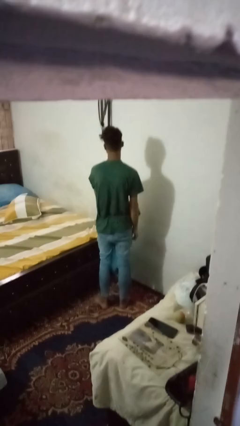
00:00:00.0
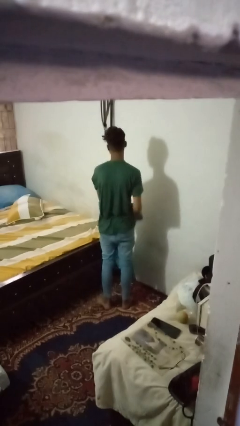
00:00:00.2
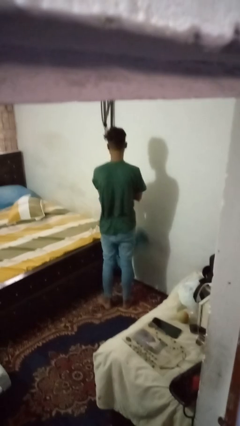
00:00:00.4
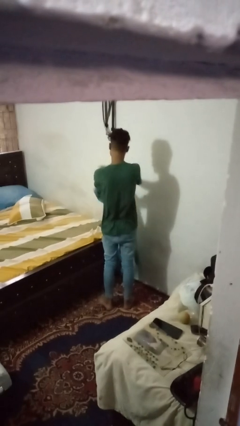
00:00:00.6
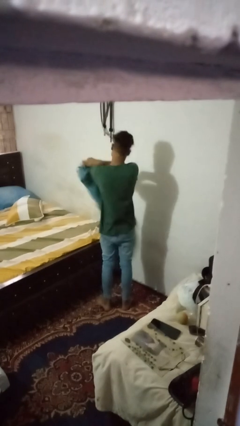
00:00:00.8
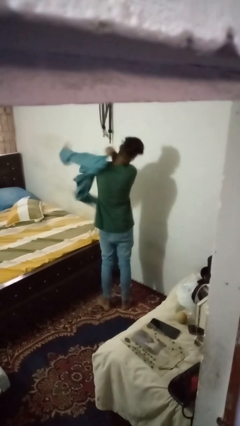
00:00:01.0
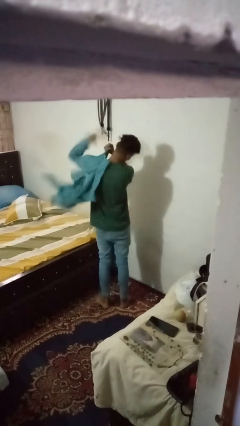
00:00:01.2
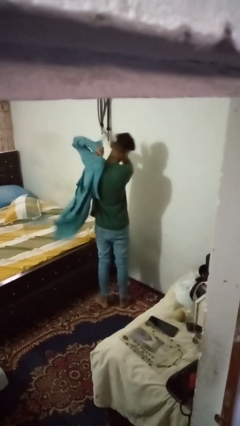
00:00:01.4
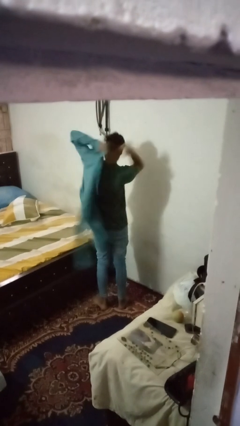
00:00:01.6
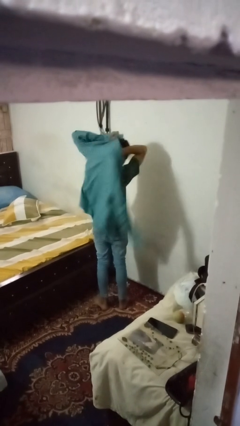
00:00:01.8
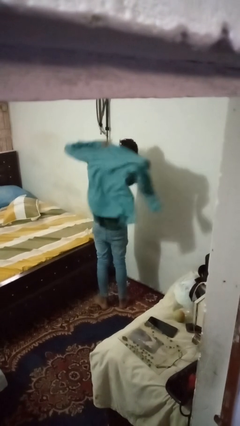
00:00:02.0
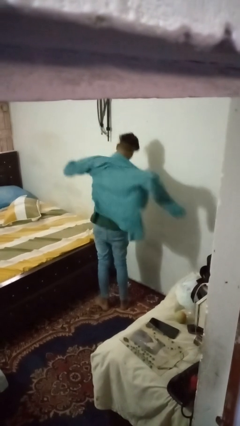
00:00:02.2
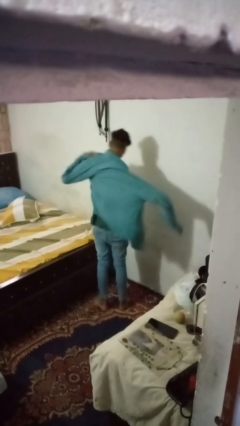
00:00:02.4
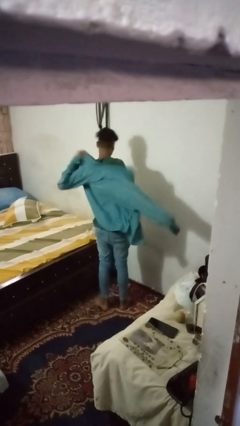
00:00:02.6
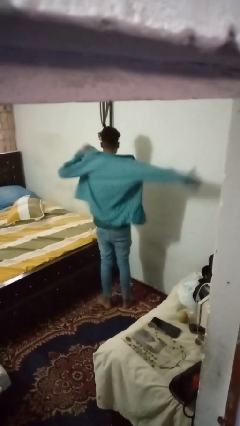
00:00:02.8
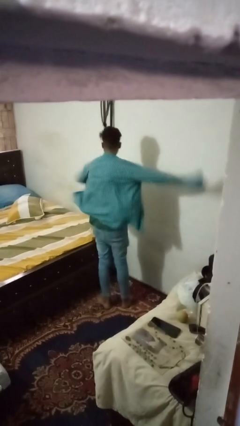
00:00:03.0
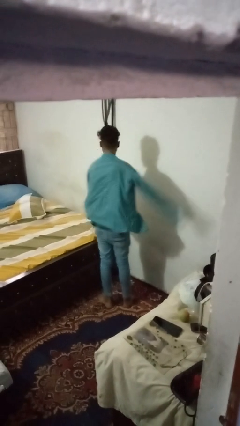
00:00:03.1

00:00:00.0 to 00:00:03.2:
person puts on shirt

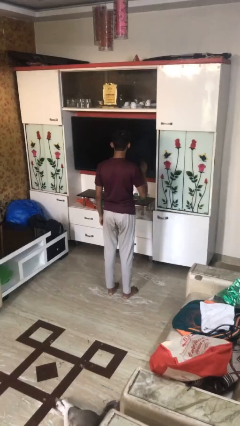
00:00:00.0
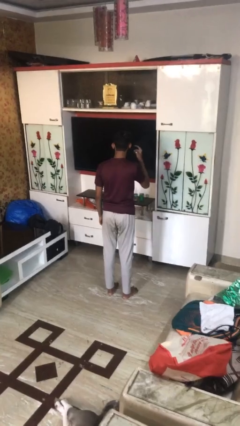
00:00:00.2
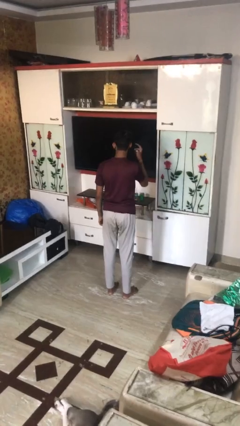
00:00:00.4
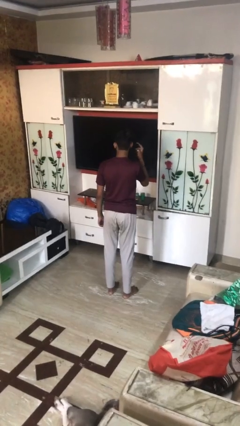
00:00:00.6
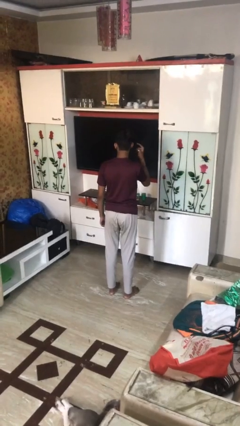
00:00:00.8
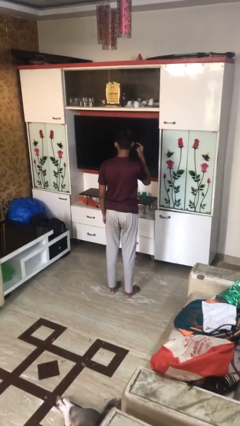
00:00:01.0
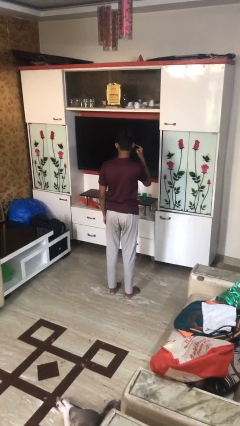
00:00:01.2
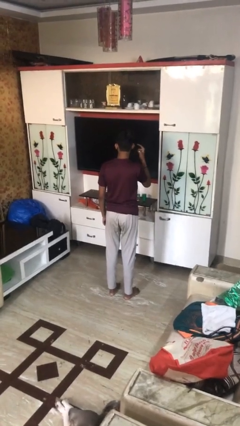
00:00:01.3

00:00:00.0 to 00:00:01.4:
person gestures listen closely

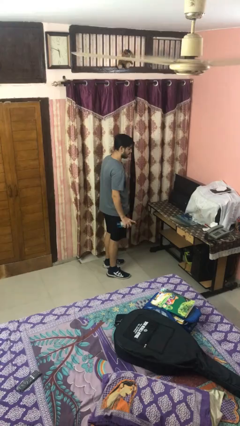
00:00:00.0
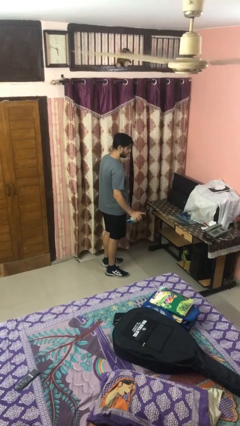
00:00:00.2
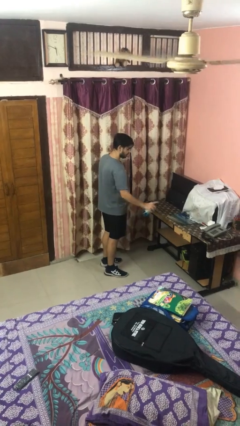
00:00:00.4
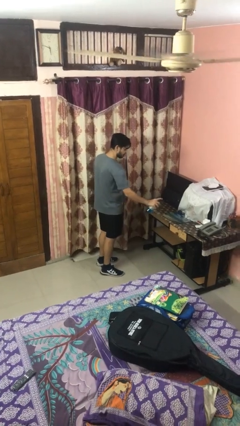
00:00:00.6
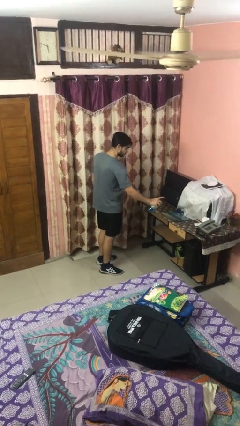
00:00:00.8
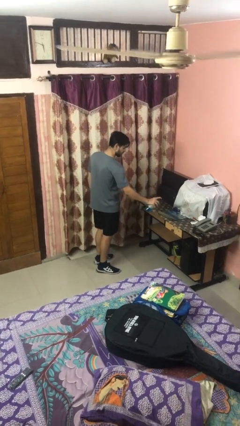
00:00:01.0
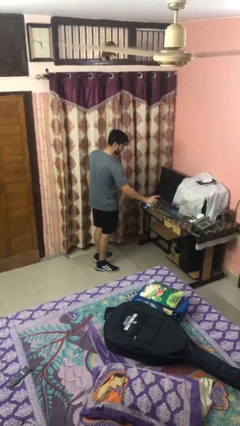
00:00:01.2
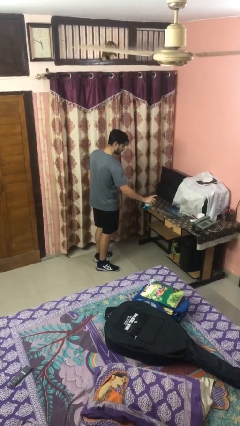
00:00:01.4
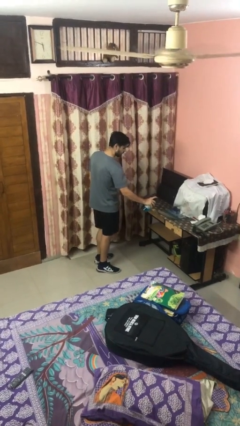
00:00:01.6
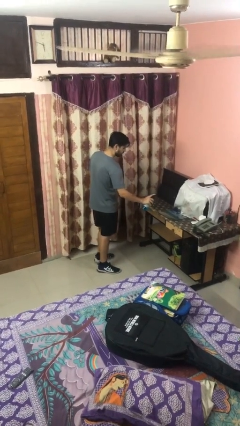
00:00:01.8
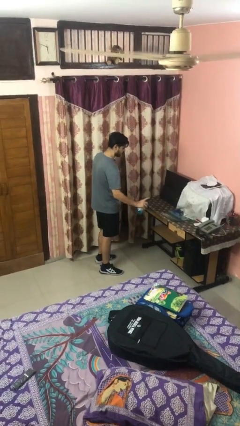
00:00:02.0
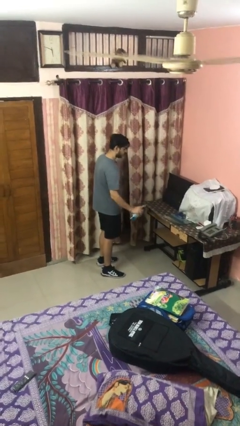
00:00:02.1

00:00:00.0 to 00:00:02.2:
person sprays from bottle

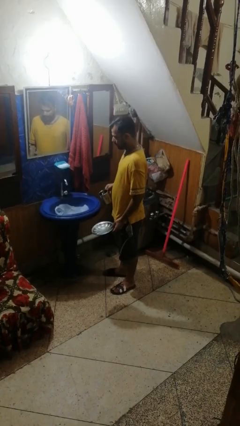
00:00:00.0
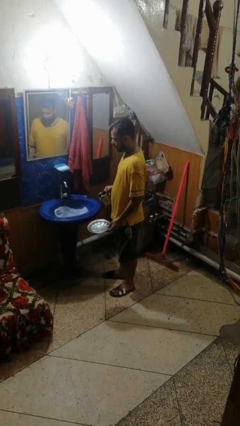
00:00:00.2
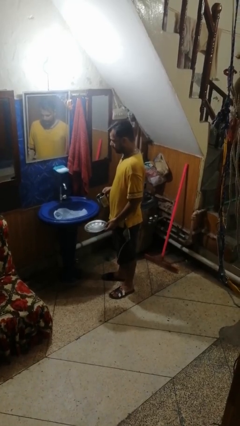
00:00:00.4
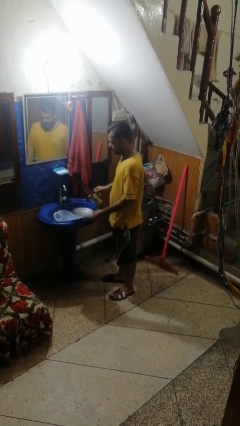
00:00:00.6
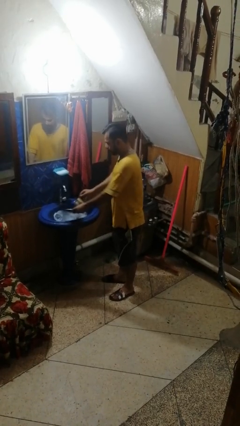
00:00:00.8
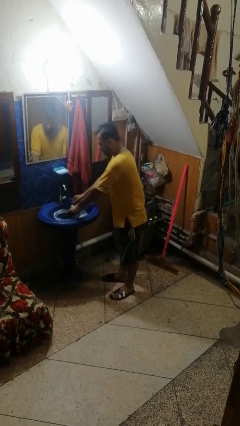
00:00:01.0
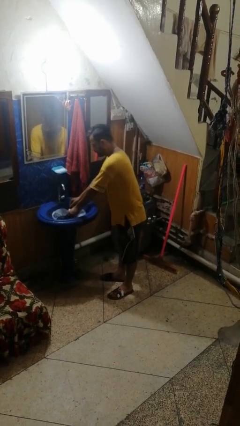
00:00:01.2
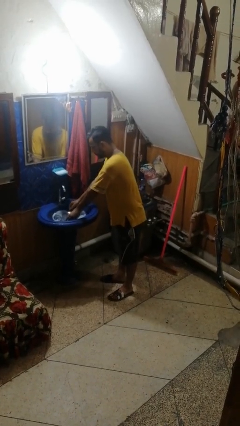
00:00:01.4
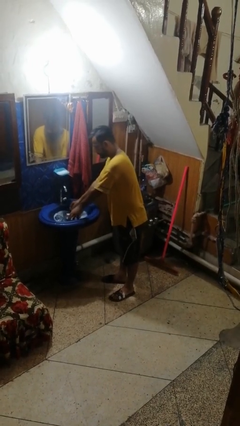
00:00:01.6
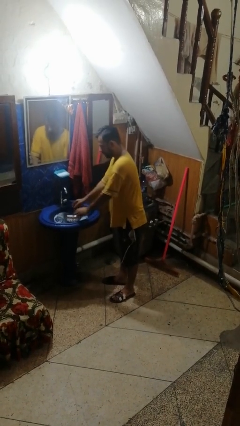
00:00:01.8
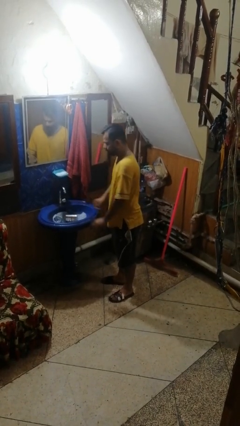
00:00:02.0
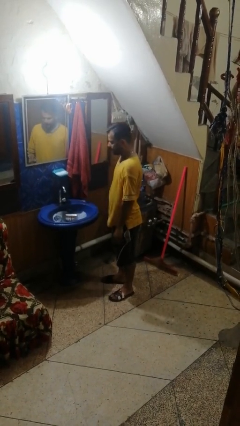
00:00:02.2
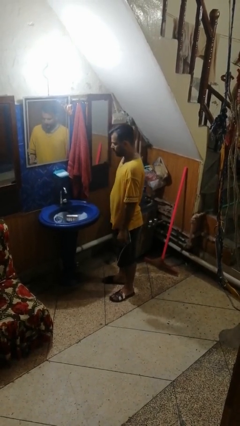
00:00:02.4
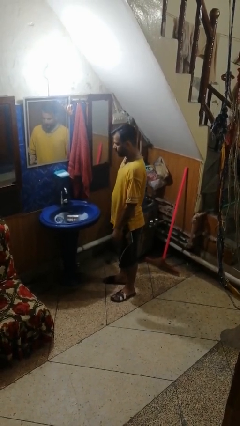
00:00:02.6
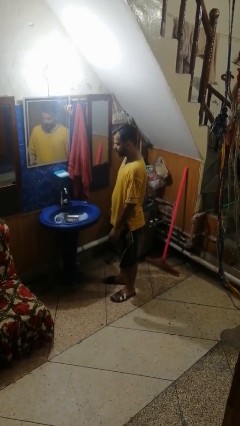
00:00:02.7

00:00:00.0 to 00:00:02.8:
person loads dishwasher

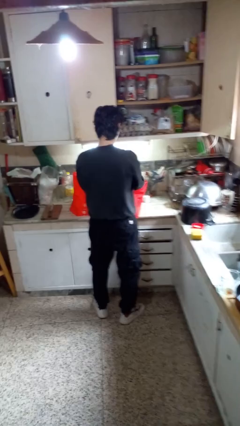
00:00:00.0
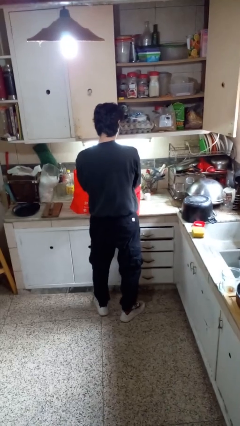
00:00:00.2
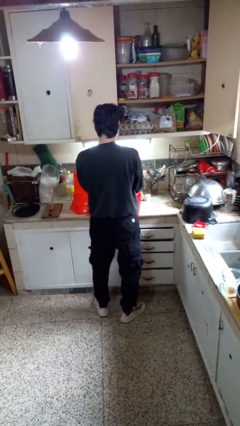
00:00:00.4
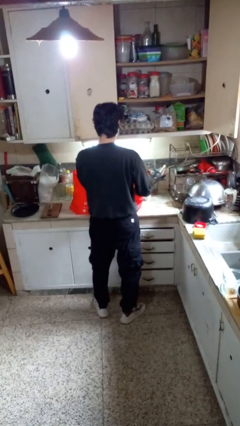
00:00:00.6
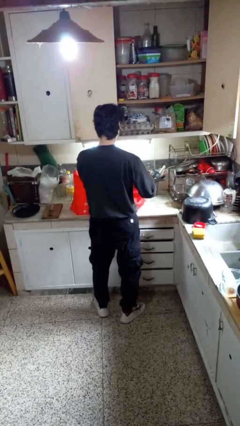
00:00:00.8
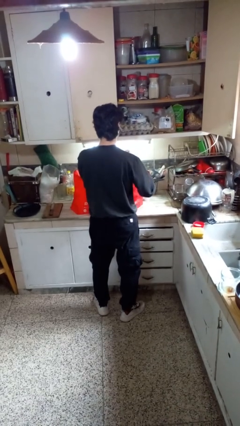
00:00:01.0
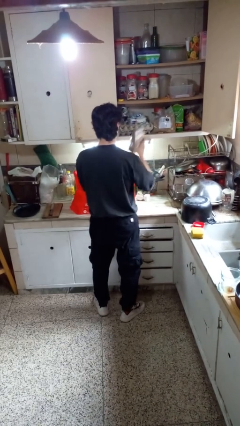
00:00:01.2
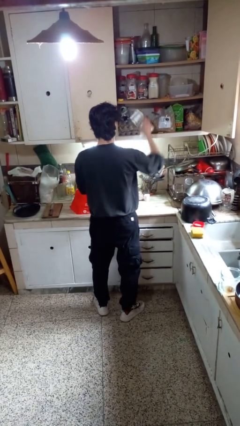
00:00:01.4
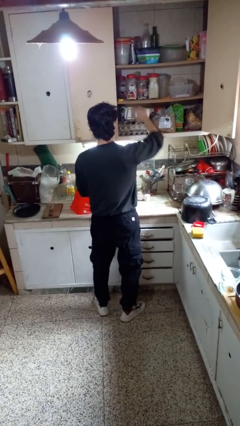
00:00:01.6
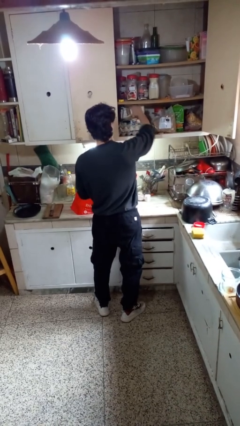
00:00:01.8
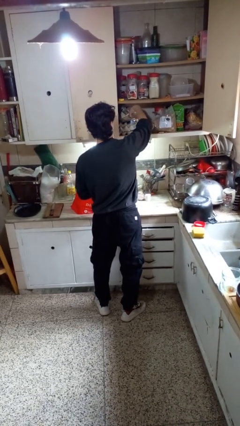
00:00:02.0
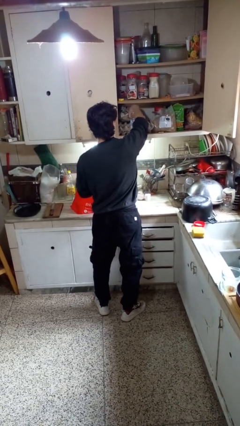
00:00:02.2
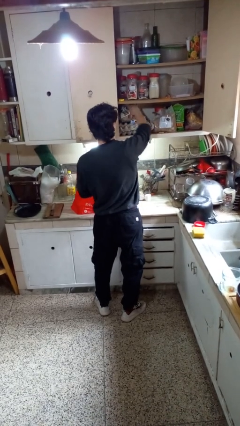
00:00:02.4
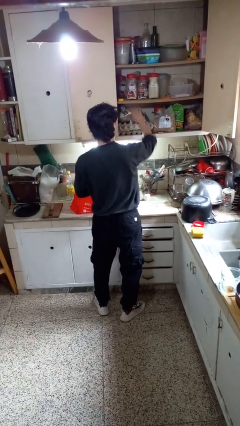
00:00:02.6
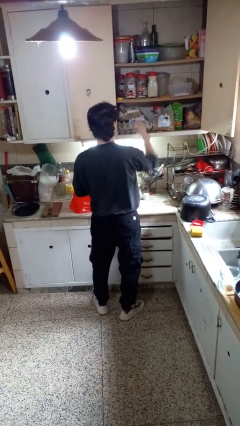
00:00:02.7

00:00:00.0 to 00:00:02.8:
person loads groceries into cabinet

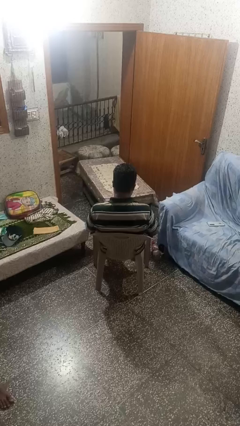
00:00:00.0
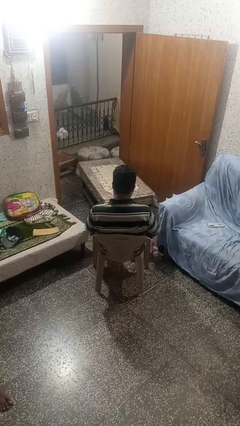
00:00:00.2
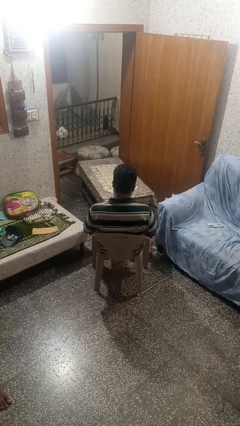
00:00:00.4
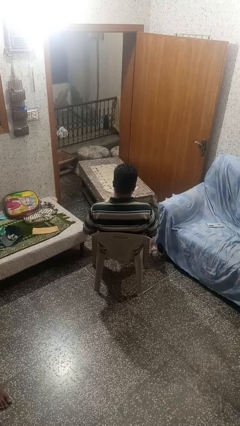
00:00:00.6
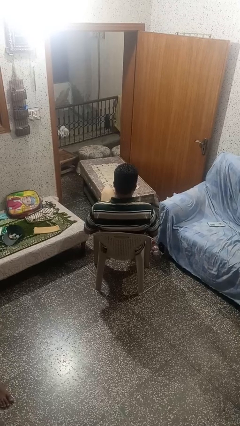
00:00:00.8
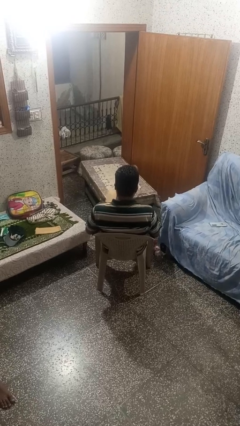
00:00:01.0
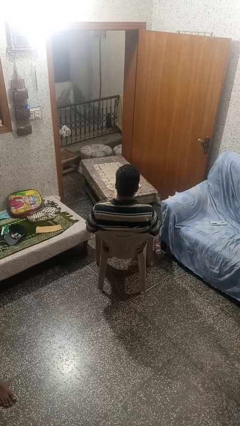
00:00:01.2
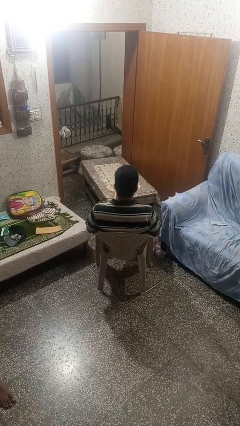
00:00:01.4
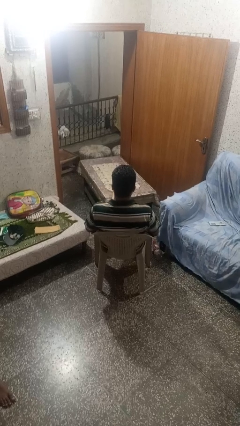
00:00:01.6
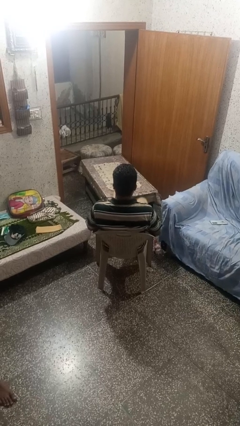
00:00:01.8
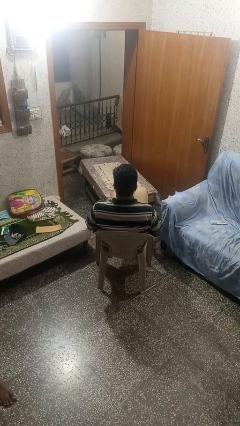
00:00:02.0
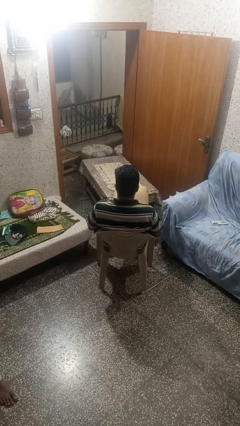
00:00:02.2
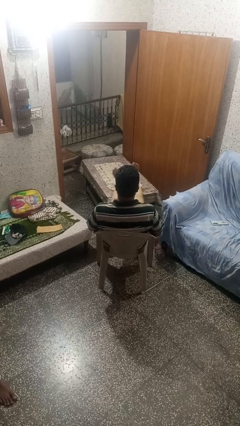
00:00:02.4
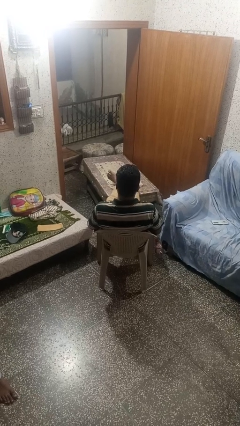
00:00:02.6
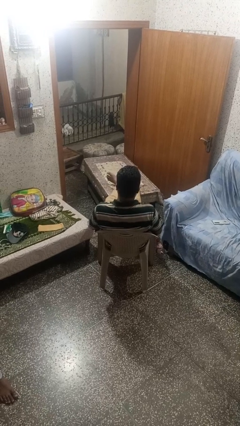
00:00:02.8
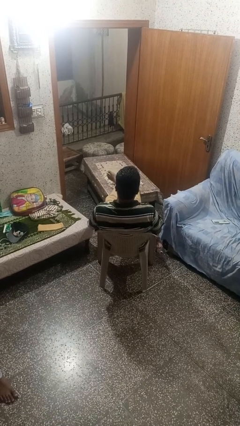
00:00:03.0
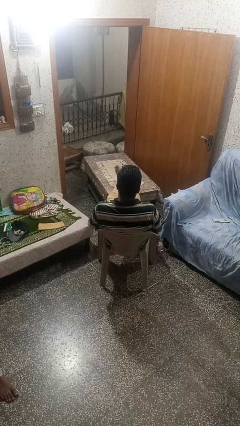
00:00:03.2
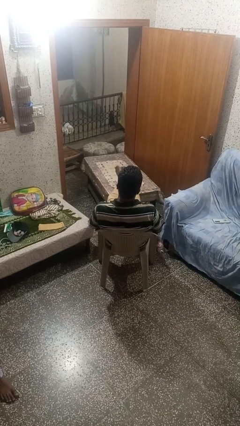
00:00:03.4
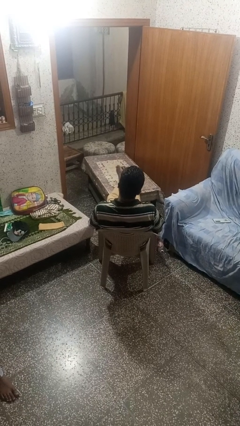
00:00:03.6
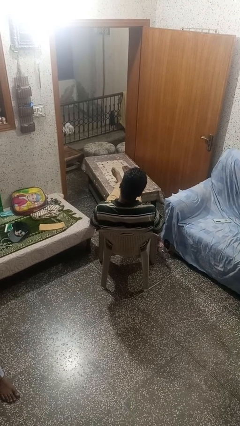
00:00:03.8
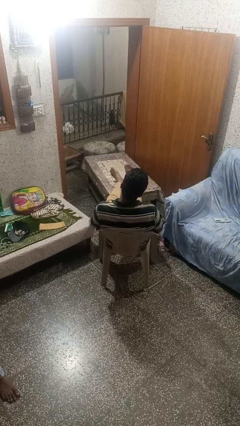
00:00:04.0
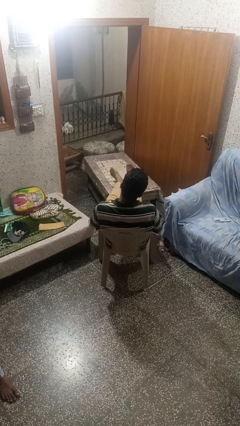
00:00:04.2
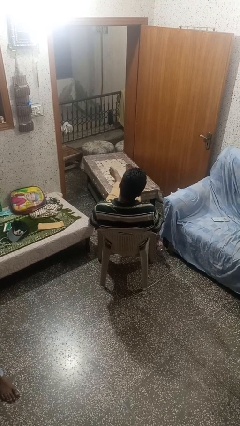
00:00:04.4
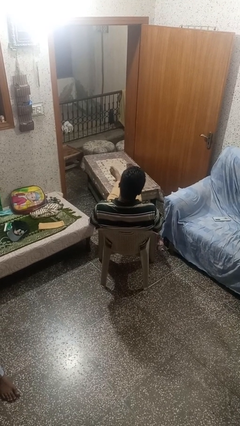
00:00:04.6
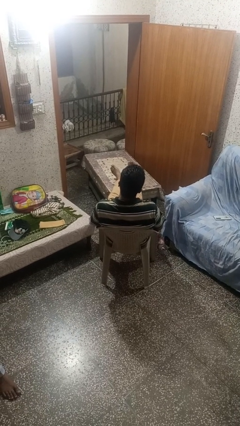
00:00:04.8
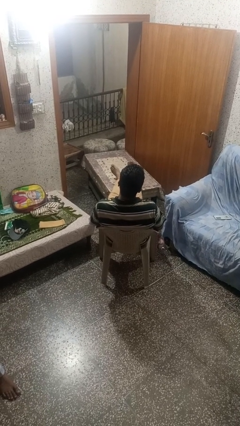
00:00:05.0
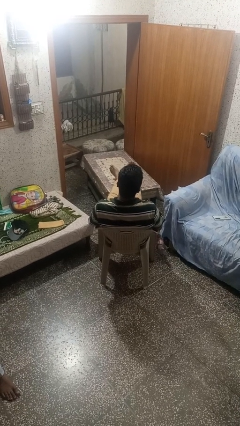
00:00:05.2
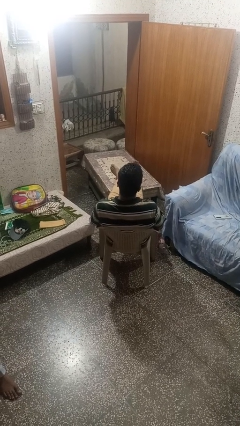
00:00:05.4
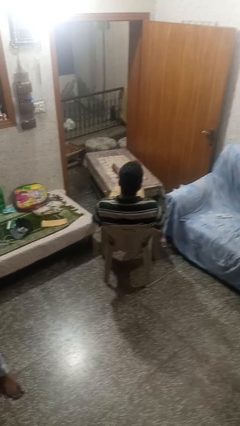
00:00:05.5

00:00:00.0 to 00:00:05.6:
person puts feet up
